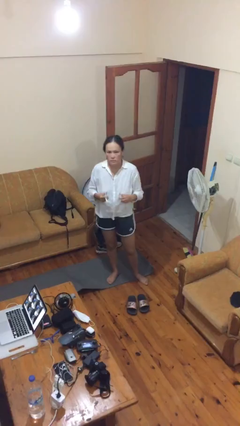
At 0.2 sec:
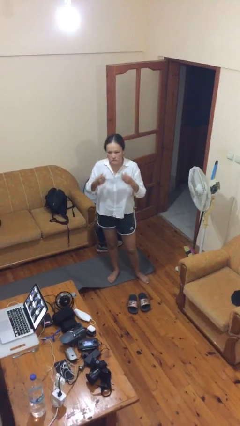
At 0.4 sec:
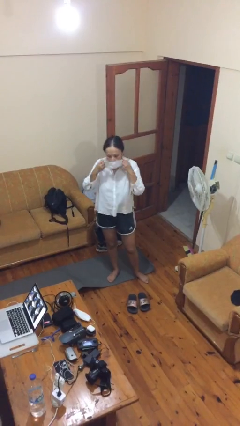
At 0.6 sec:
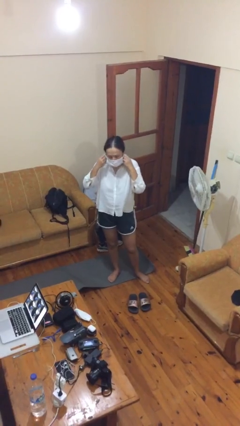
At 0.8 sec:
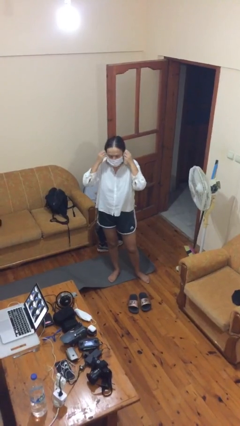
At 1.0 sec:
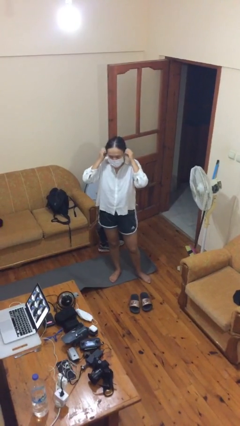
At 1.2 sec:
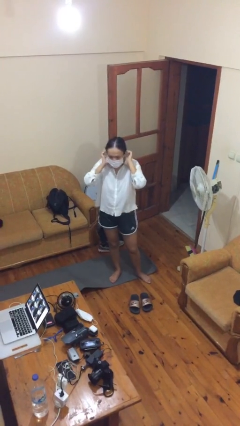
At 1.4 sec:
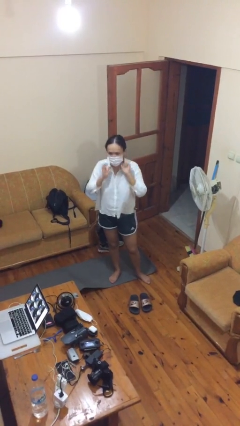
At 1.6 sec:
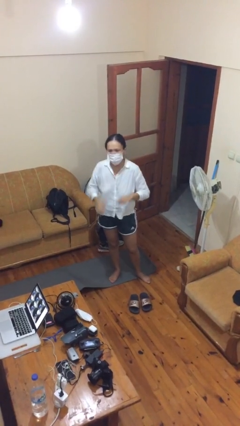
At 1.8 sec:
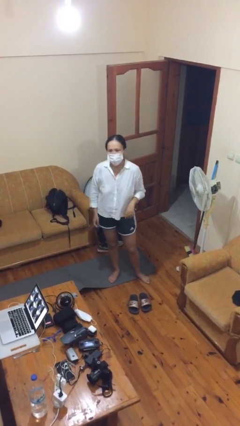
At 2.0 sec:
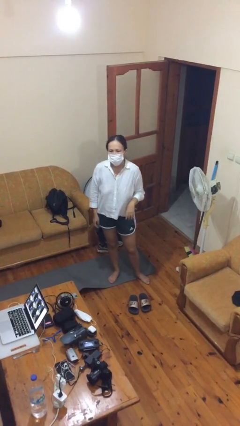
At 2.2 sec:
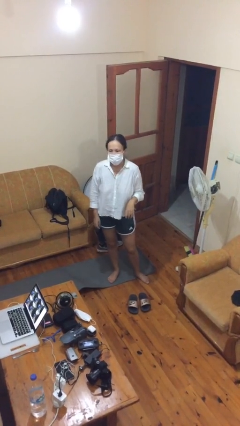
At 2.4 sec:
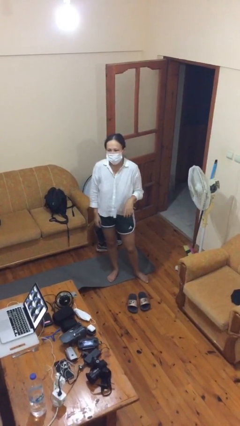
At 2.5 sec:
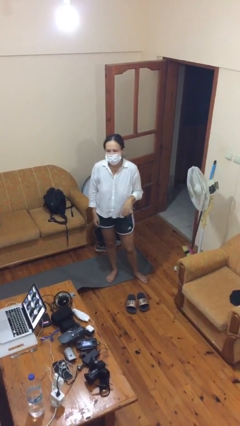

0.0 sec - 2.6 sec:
person puts on facemask

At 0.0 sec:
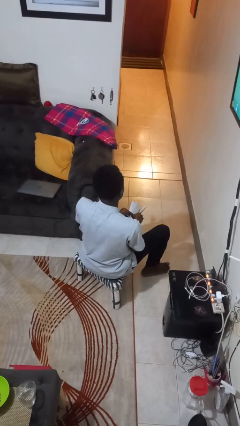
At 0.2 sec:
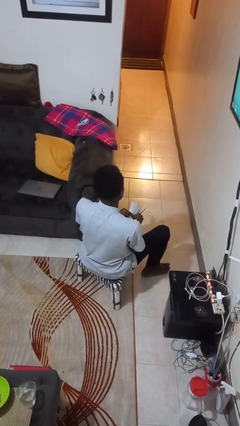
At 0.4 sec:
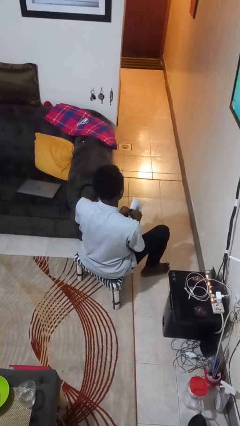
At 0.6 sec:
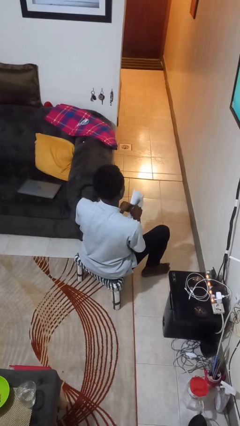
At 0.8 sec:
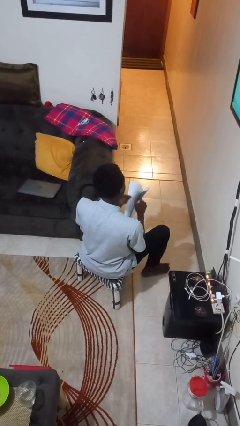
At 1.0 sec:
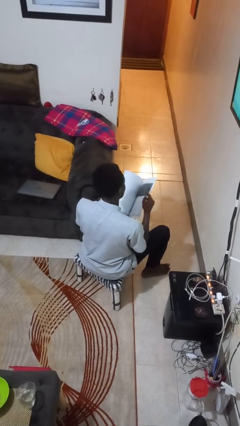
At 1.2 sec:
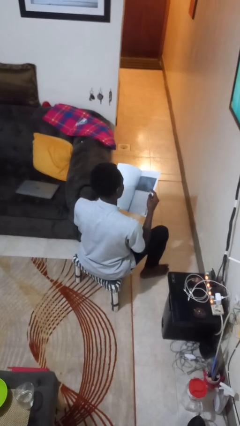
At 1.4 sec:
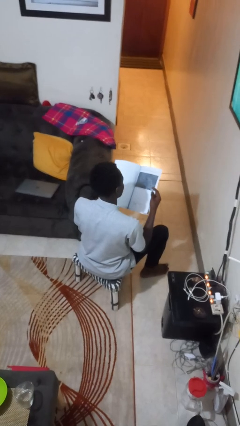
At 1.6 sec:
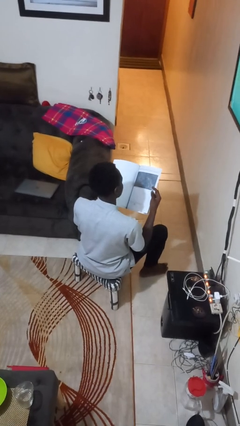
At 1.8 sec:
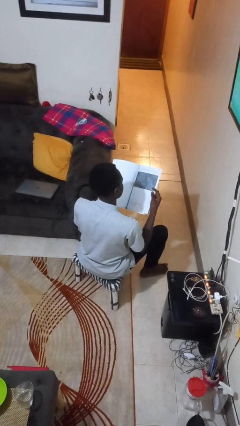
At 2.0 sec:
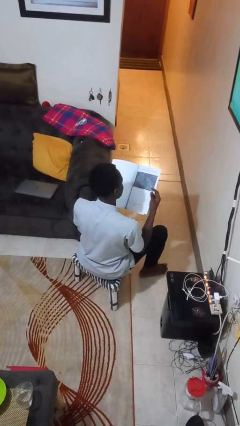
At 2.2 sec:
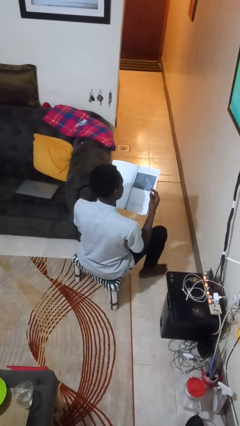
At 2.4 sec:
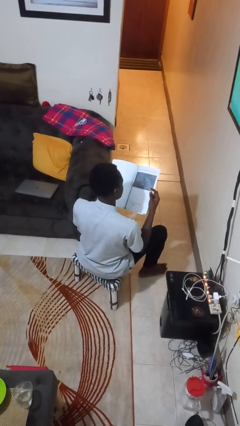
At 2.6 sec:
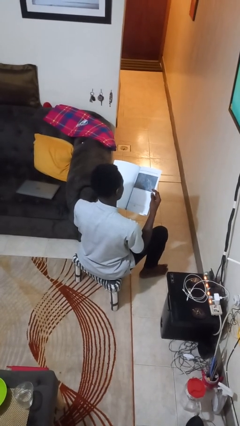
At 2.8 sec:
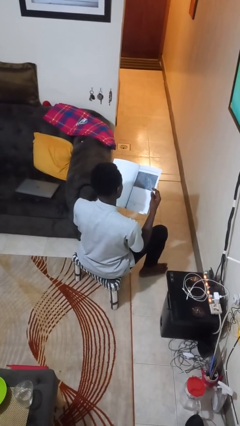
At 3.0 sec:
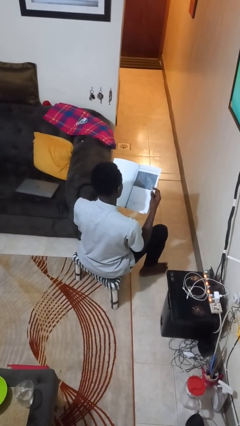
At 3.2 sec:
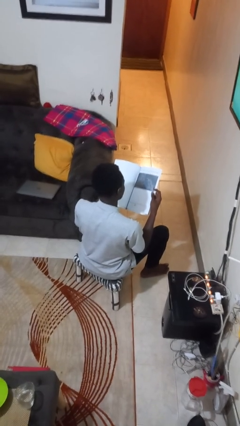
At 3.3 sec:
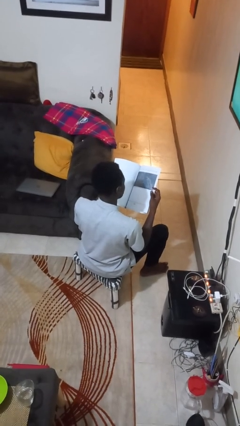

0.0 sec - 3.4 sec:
person reads magazine

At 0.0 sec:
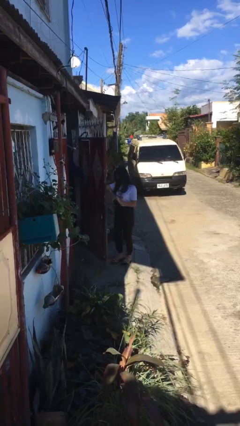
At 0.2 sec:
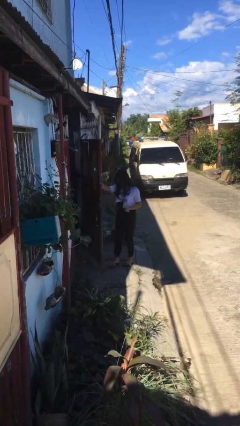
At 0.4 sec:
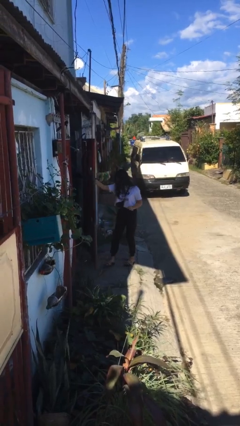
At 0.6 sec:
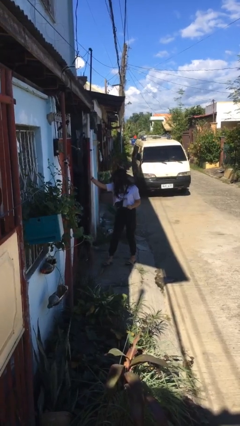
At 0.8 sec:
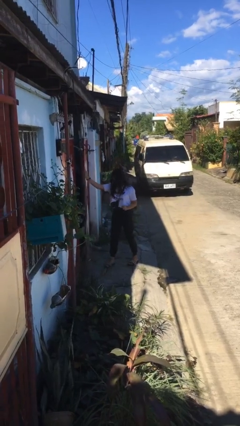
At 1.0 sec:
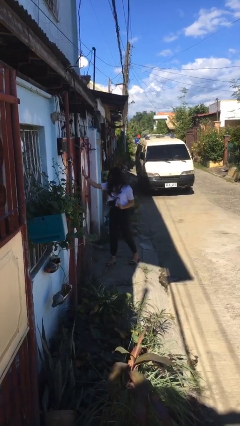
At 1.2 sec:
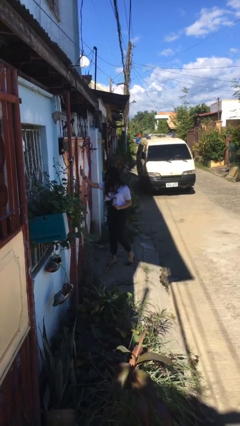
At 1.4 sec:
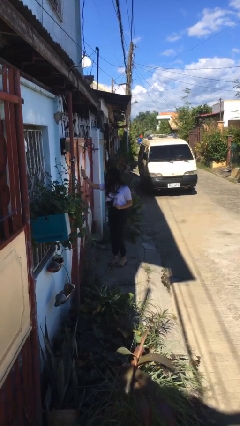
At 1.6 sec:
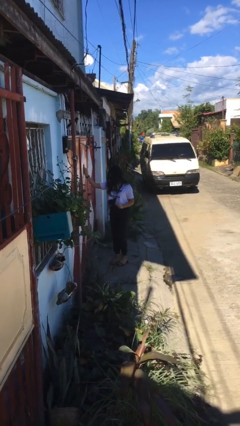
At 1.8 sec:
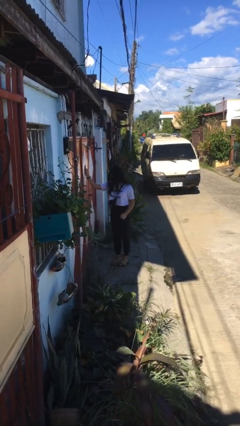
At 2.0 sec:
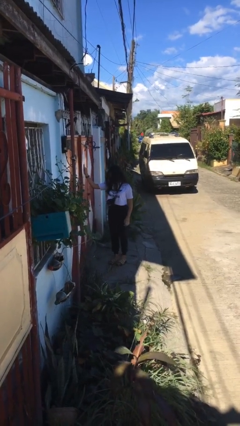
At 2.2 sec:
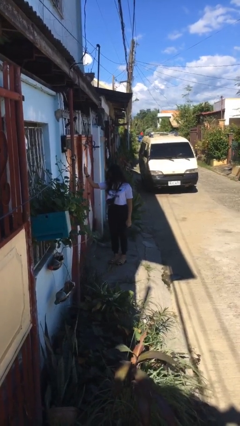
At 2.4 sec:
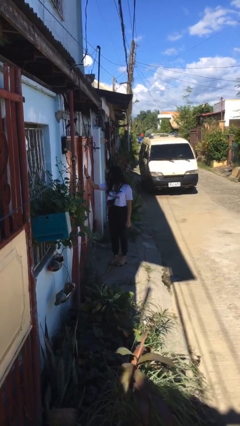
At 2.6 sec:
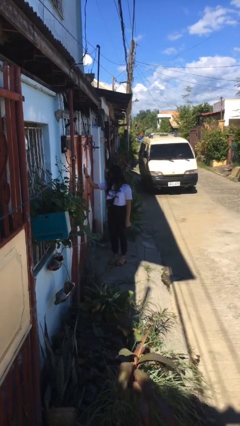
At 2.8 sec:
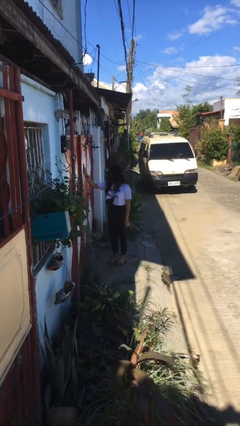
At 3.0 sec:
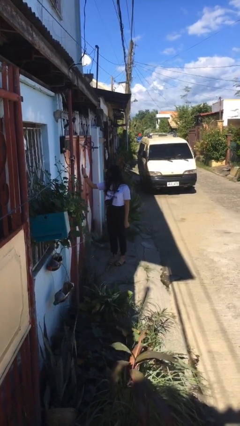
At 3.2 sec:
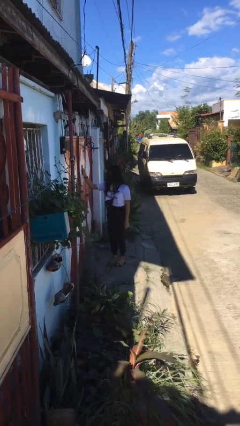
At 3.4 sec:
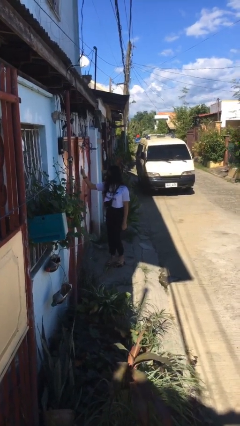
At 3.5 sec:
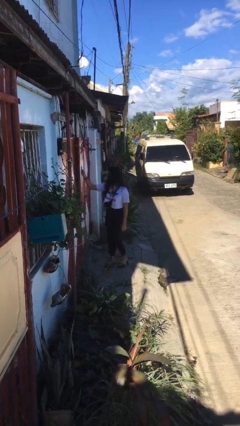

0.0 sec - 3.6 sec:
person closes gate

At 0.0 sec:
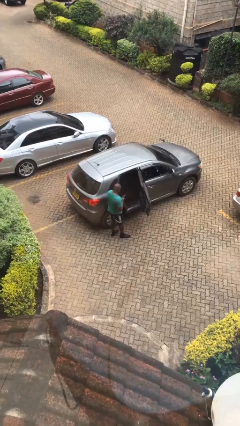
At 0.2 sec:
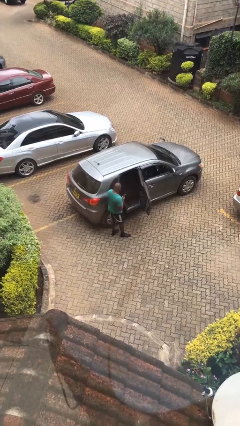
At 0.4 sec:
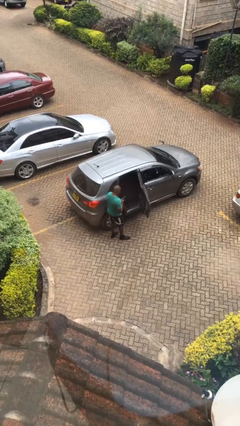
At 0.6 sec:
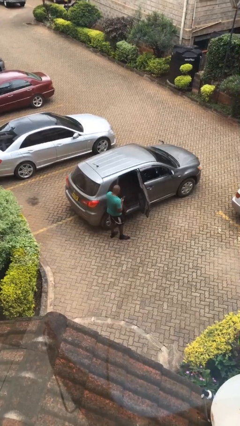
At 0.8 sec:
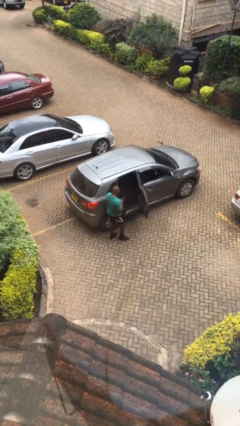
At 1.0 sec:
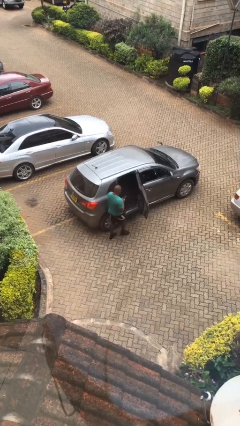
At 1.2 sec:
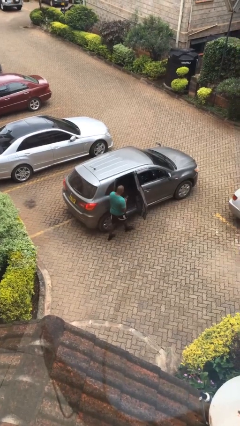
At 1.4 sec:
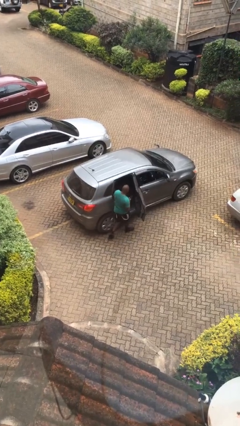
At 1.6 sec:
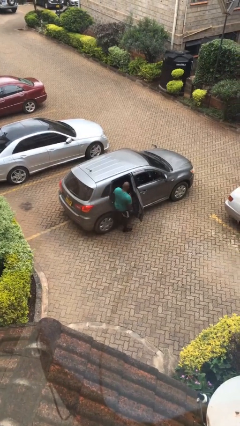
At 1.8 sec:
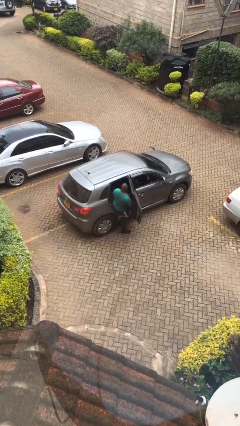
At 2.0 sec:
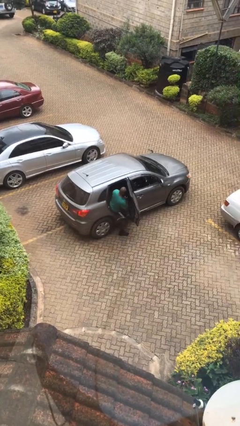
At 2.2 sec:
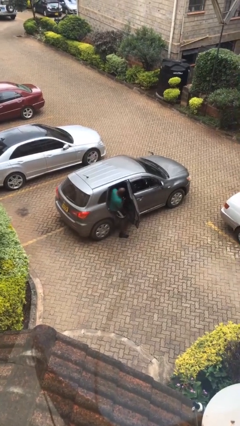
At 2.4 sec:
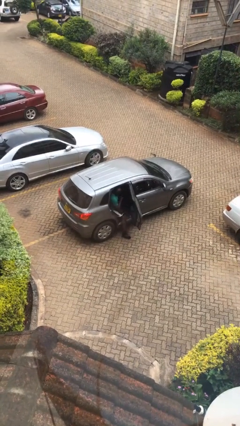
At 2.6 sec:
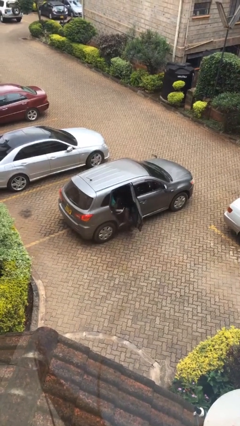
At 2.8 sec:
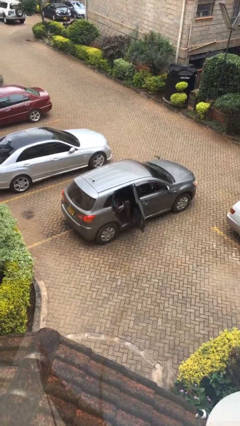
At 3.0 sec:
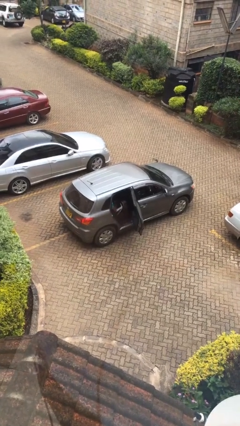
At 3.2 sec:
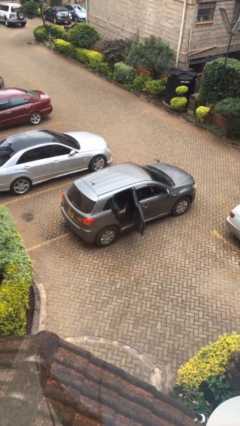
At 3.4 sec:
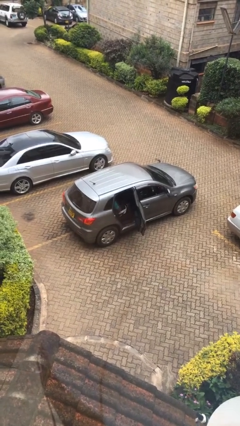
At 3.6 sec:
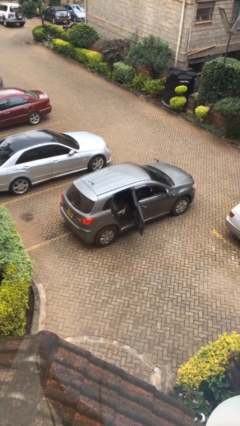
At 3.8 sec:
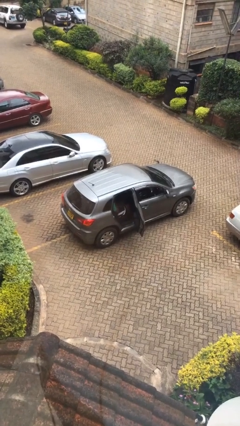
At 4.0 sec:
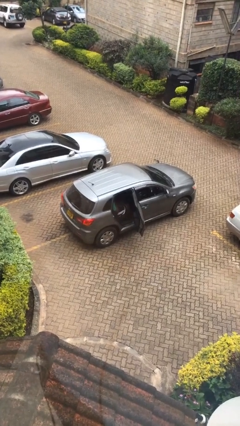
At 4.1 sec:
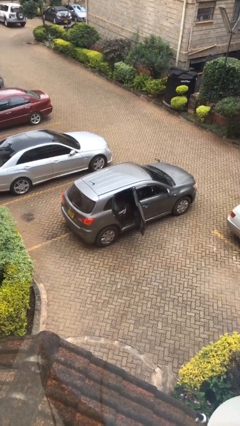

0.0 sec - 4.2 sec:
person enters car

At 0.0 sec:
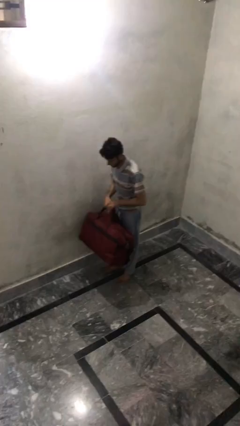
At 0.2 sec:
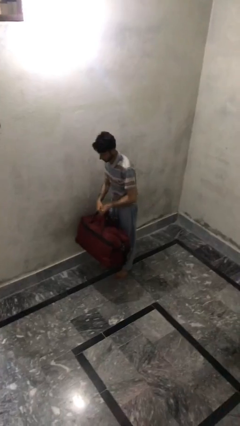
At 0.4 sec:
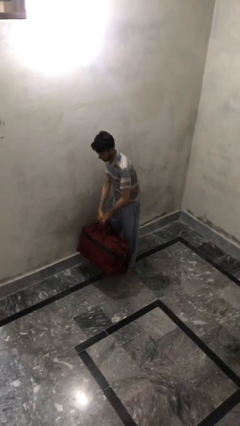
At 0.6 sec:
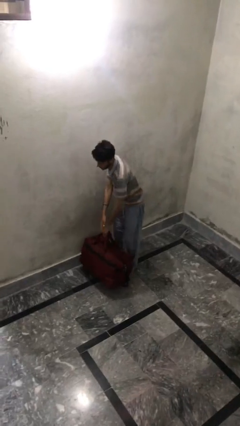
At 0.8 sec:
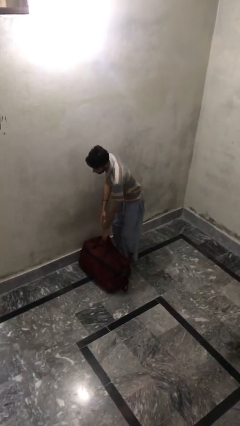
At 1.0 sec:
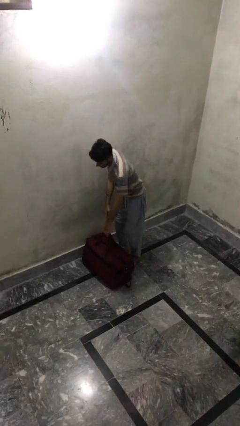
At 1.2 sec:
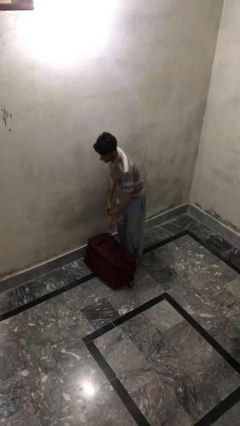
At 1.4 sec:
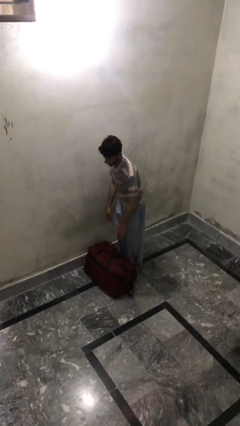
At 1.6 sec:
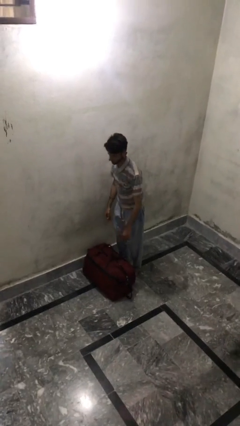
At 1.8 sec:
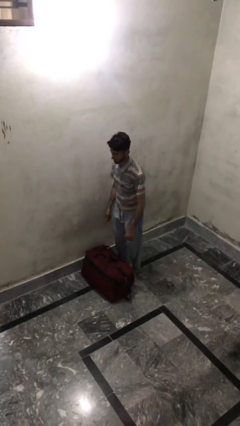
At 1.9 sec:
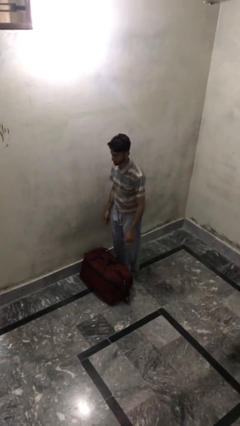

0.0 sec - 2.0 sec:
person puts down object on floor

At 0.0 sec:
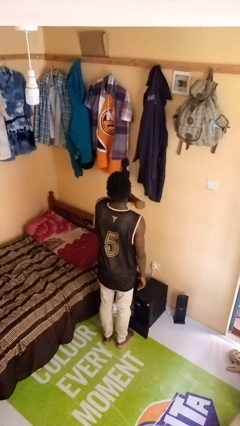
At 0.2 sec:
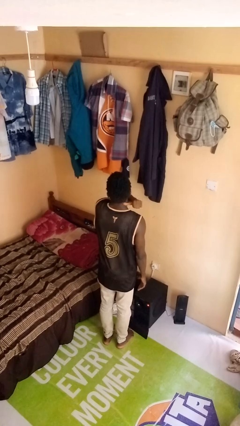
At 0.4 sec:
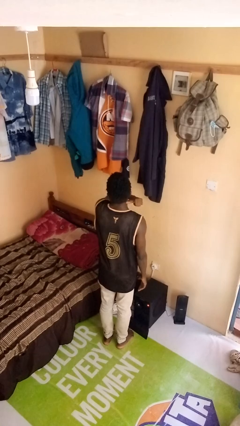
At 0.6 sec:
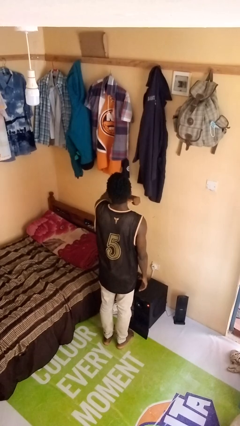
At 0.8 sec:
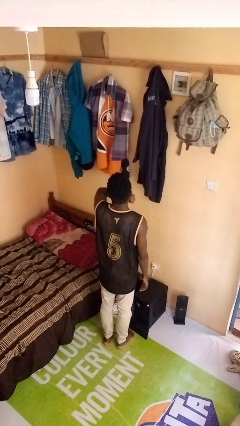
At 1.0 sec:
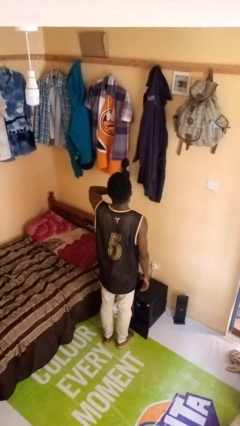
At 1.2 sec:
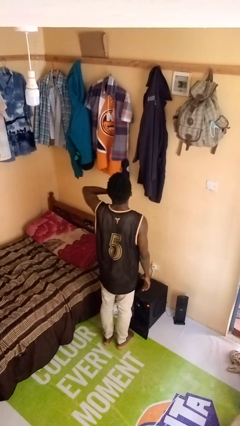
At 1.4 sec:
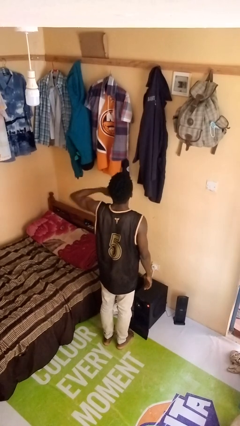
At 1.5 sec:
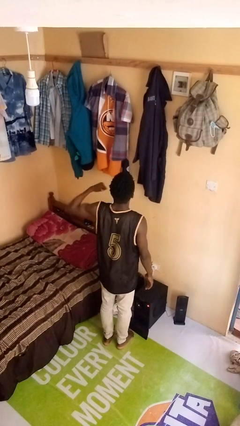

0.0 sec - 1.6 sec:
person gestures cut
